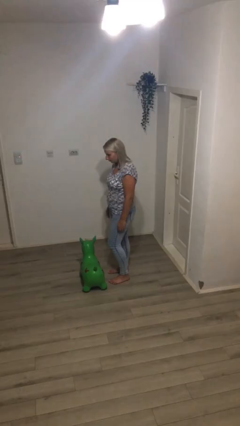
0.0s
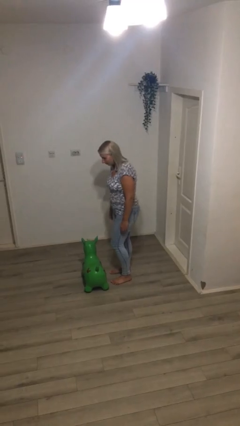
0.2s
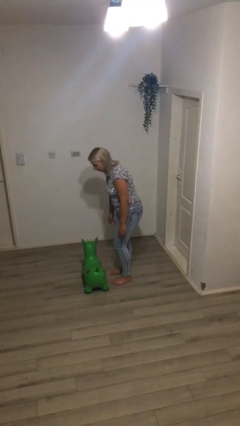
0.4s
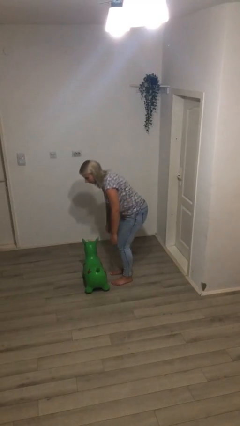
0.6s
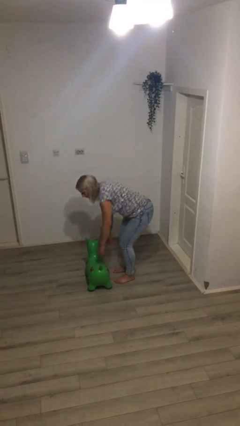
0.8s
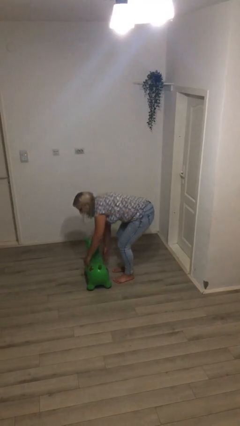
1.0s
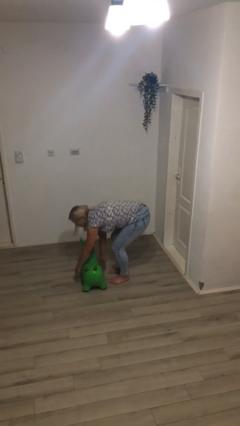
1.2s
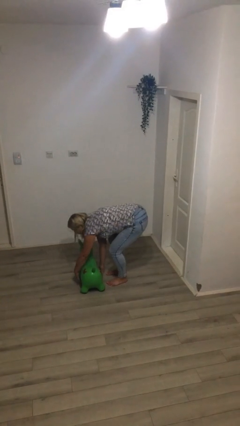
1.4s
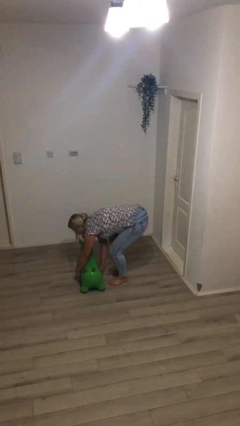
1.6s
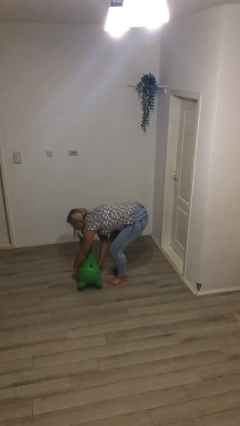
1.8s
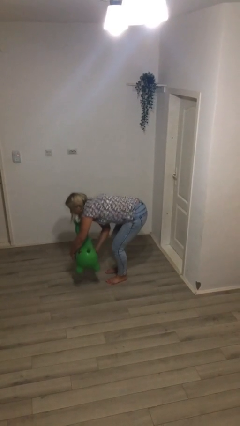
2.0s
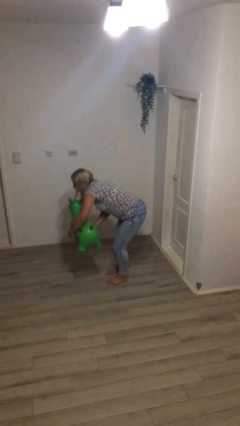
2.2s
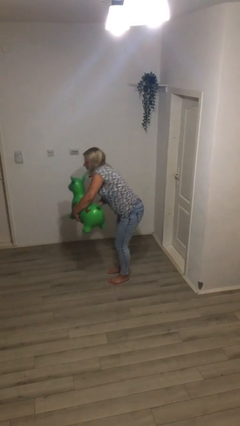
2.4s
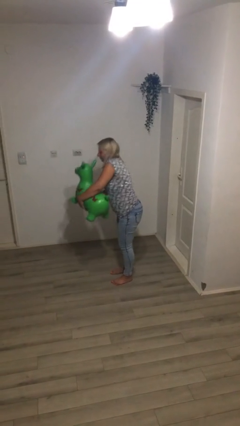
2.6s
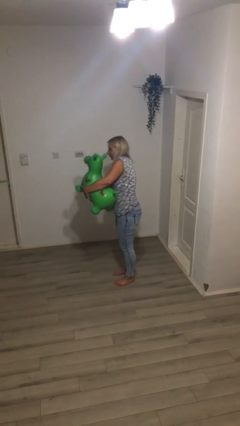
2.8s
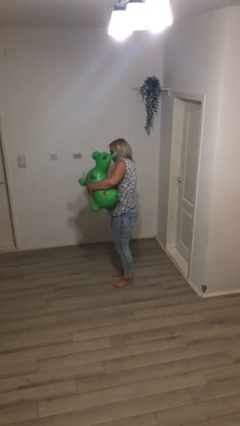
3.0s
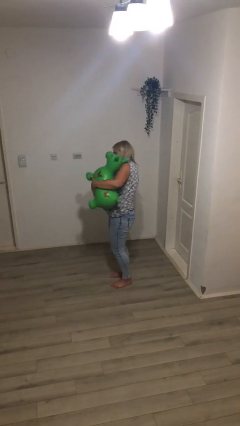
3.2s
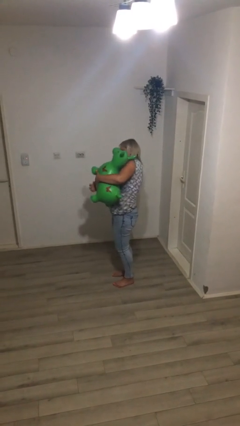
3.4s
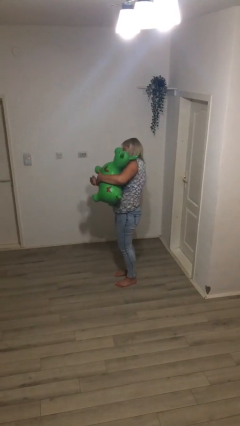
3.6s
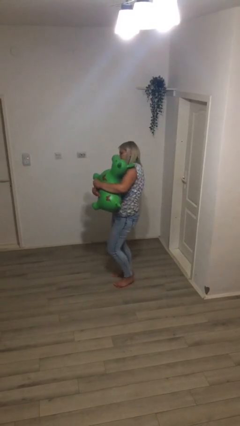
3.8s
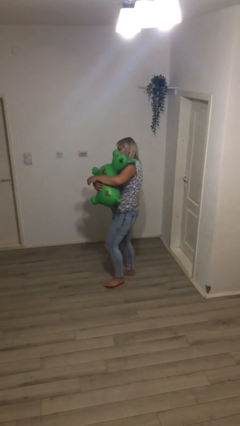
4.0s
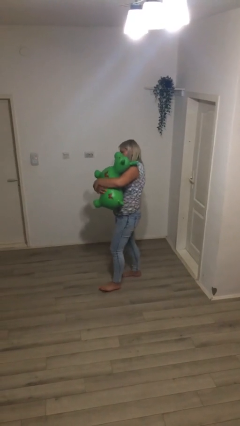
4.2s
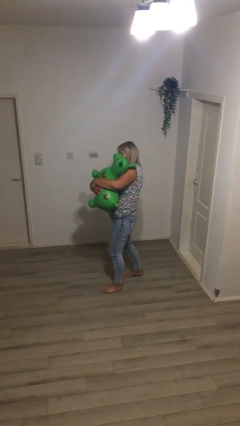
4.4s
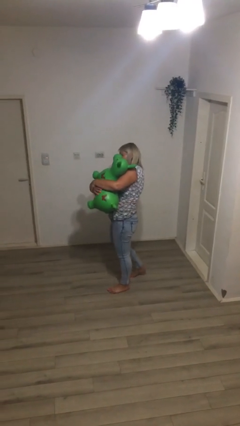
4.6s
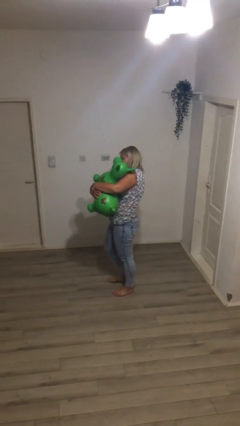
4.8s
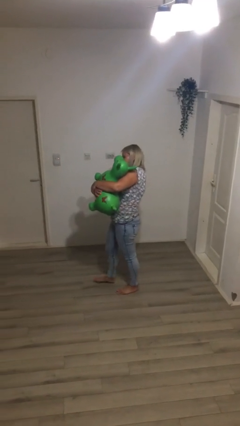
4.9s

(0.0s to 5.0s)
person picks up object from floor

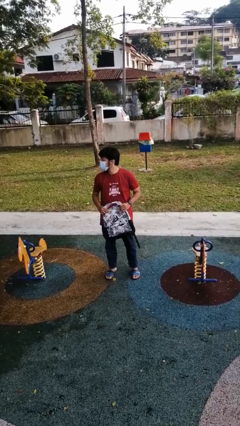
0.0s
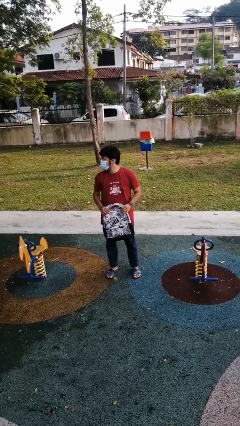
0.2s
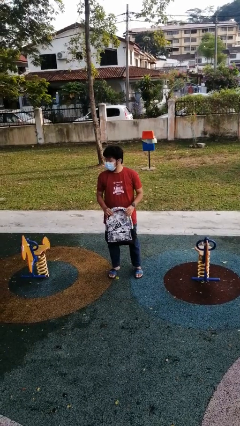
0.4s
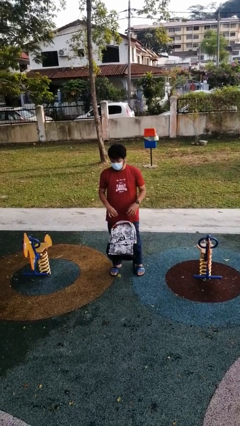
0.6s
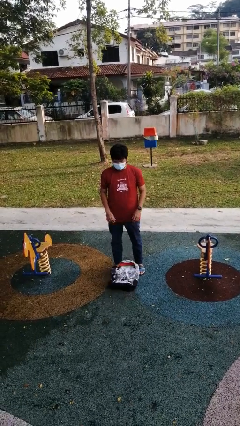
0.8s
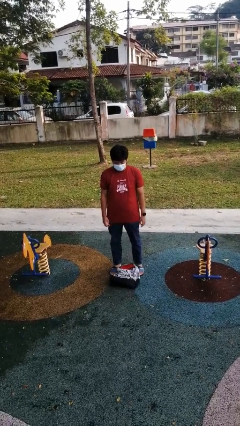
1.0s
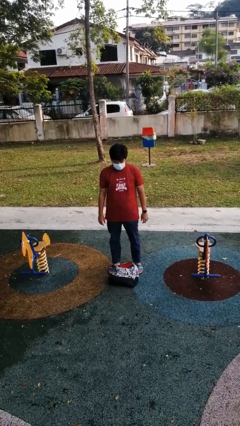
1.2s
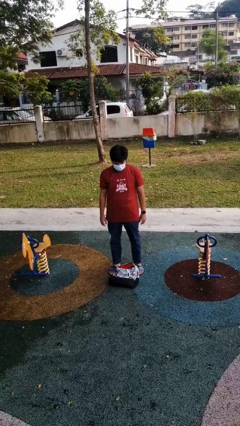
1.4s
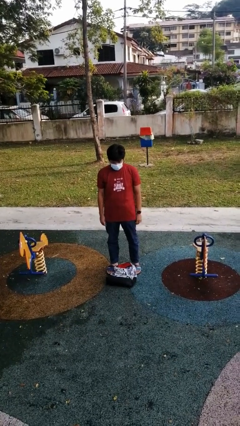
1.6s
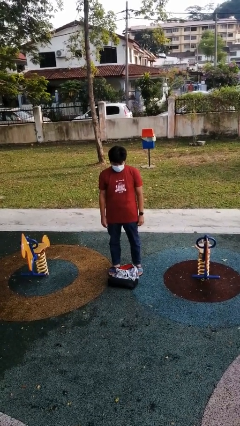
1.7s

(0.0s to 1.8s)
person drops object

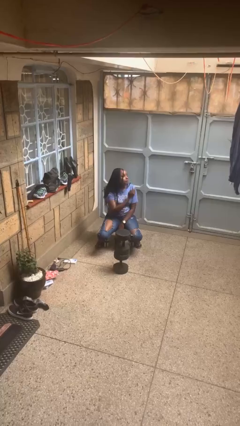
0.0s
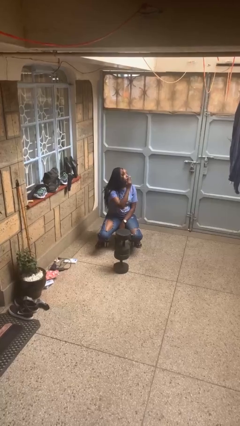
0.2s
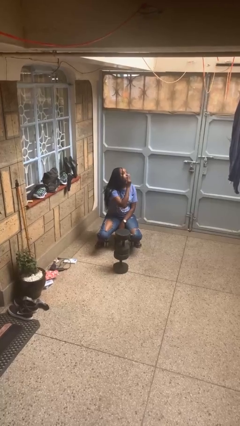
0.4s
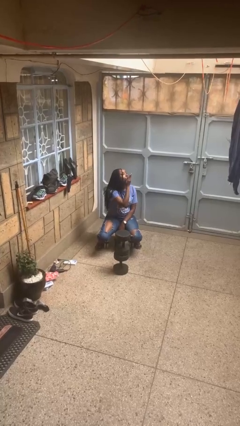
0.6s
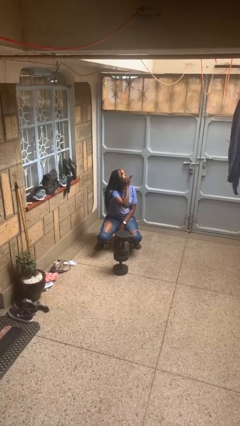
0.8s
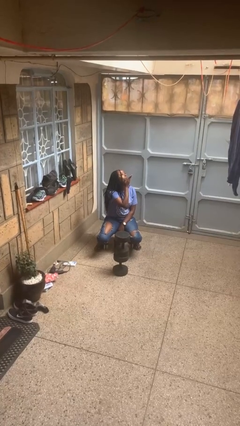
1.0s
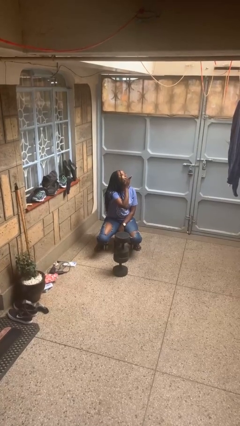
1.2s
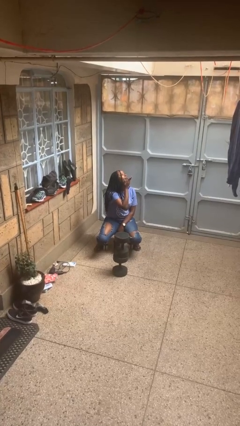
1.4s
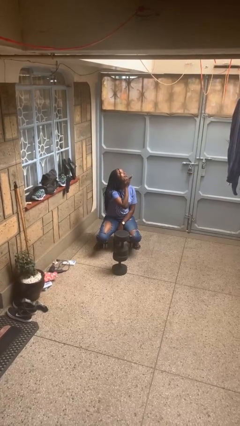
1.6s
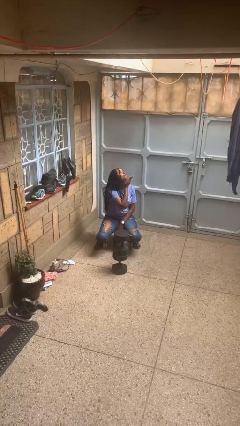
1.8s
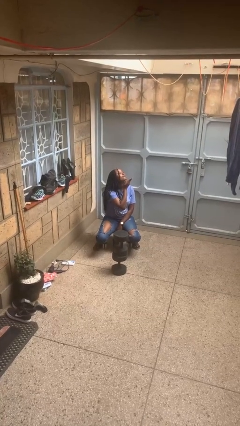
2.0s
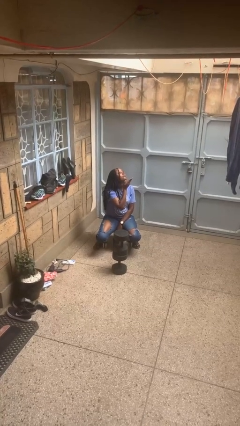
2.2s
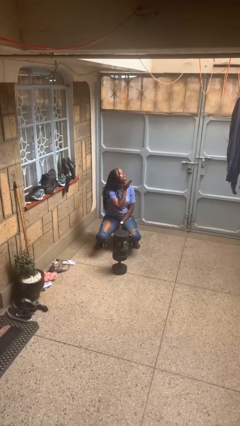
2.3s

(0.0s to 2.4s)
person gestures blow kiss

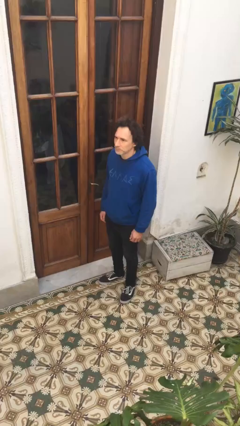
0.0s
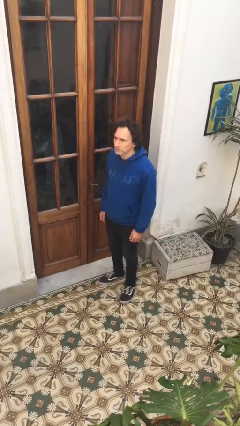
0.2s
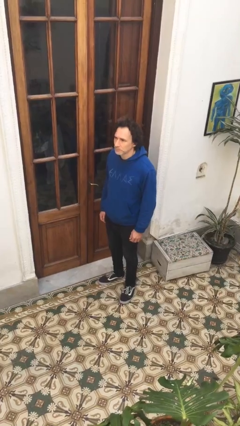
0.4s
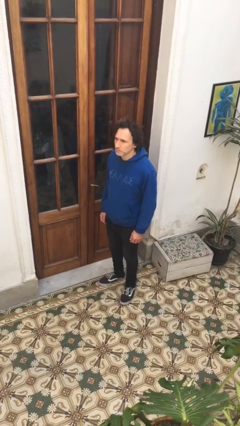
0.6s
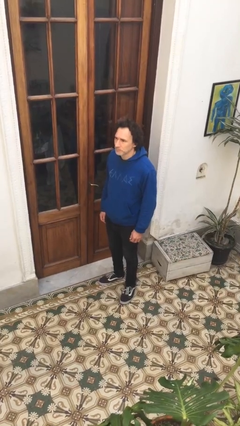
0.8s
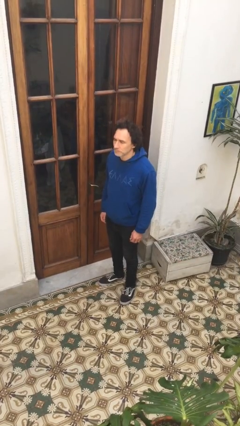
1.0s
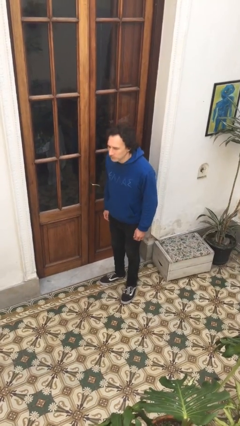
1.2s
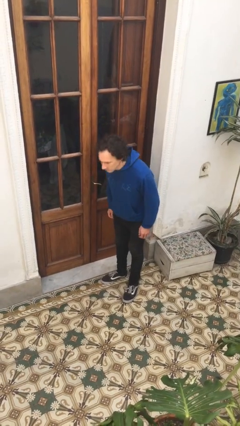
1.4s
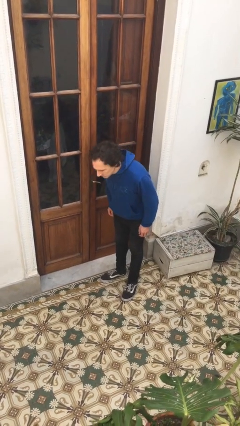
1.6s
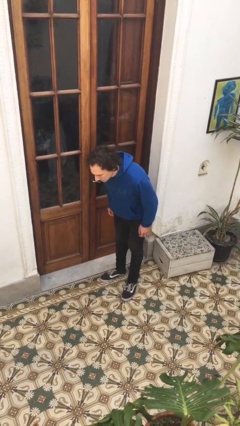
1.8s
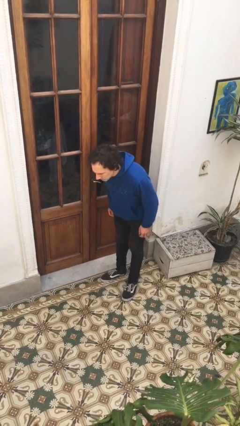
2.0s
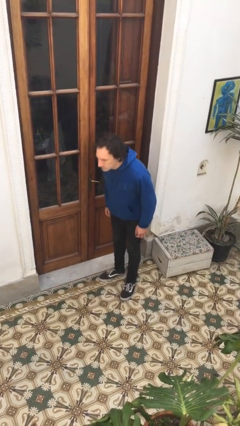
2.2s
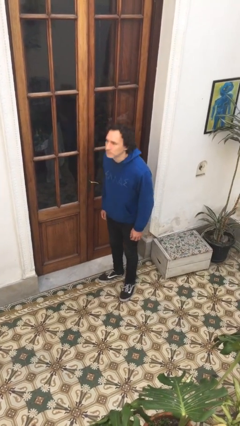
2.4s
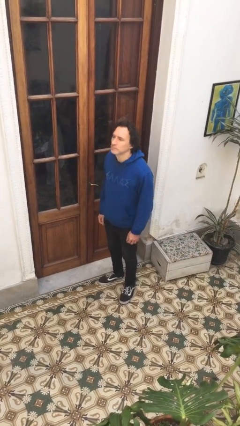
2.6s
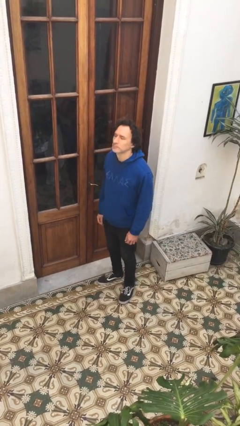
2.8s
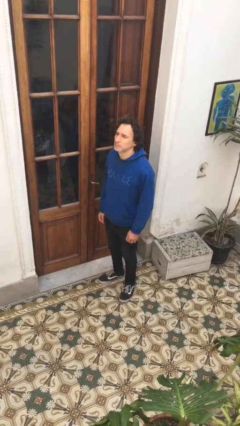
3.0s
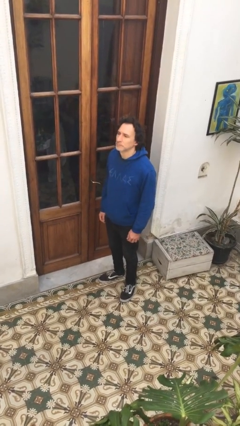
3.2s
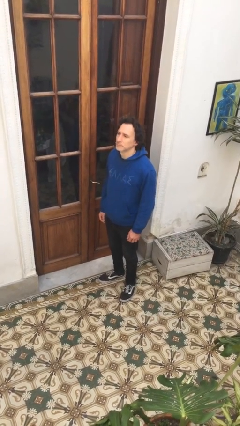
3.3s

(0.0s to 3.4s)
person bows

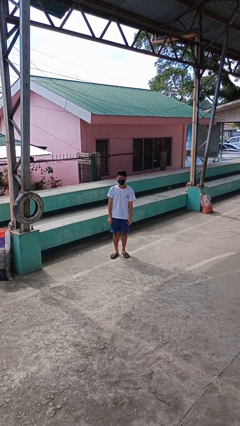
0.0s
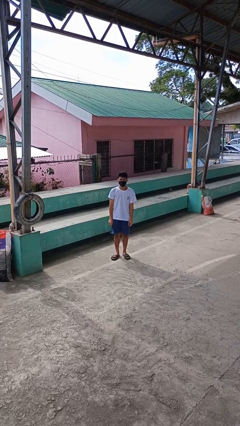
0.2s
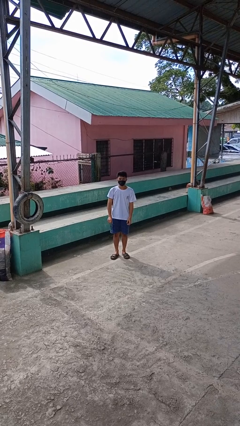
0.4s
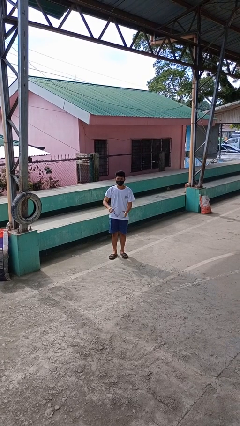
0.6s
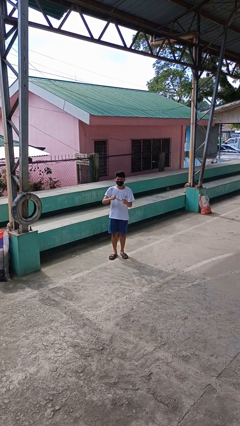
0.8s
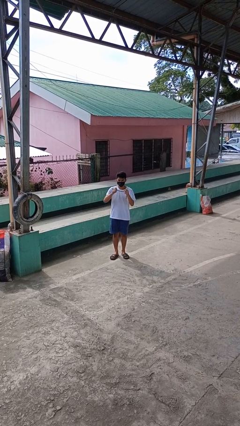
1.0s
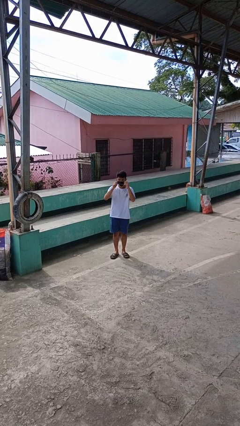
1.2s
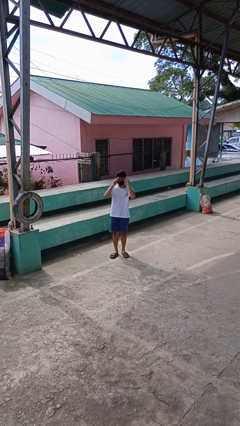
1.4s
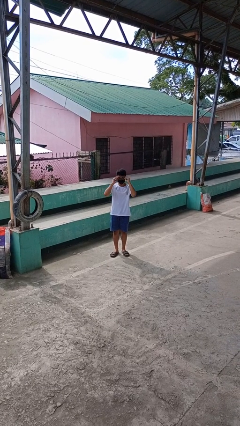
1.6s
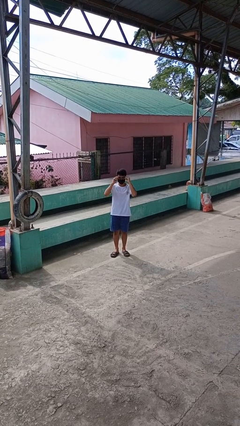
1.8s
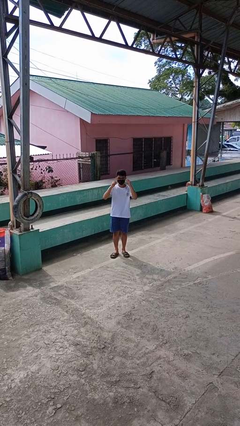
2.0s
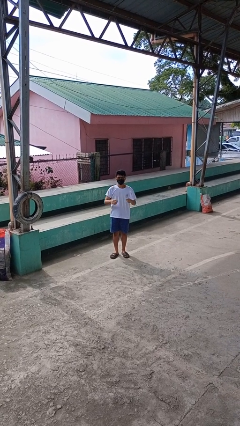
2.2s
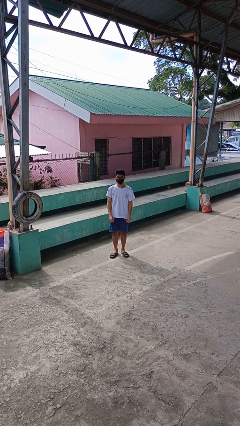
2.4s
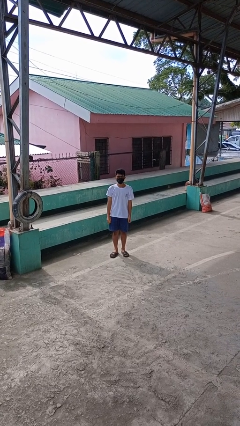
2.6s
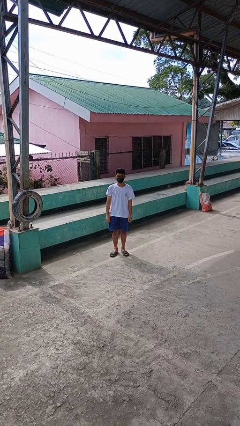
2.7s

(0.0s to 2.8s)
person puts on glasses

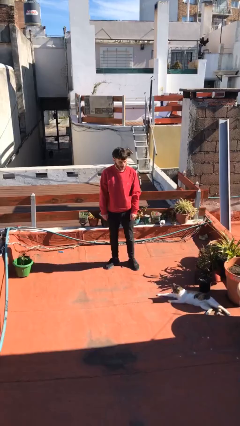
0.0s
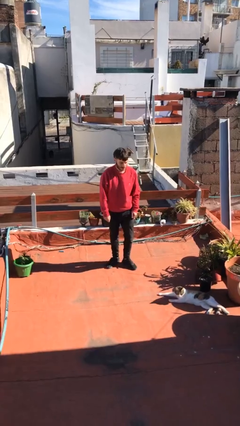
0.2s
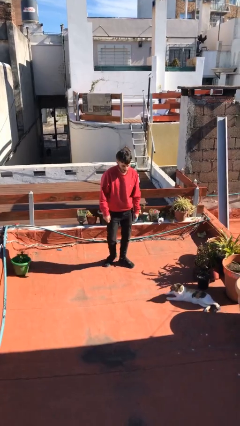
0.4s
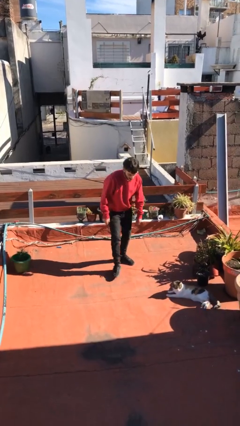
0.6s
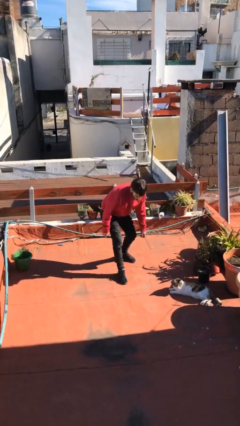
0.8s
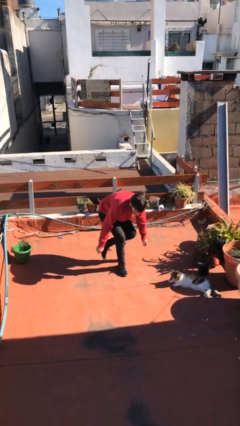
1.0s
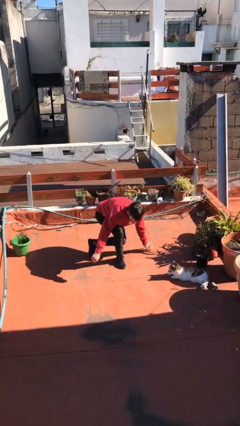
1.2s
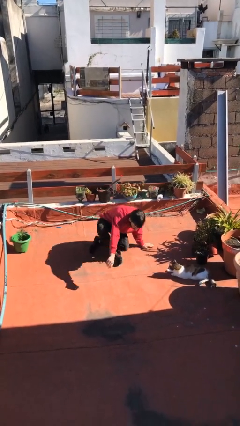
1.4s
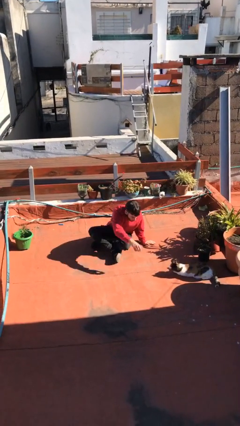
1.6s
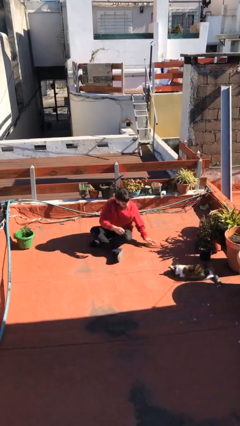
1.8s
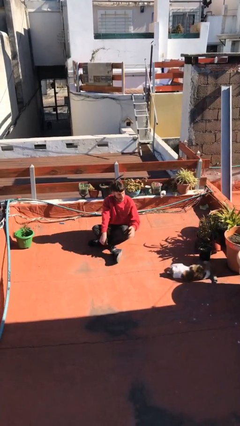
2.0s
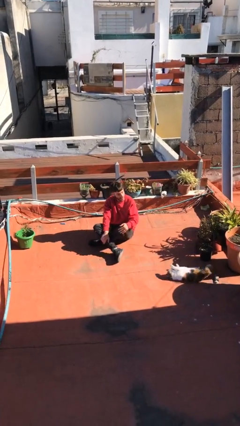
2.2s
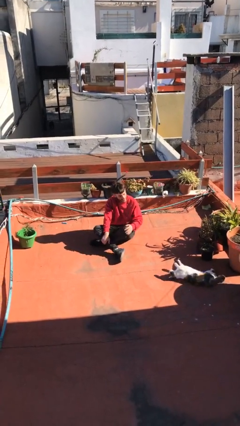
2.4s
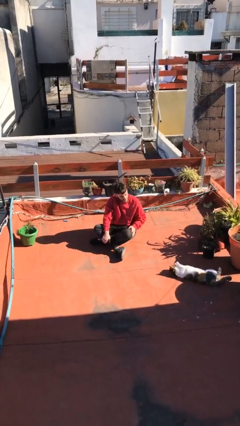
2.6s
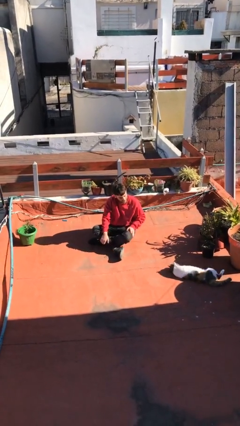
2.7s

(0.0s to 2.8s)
person sits crisscross
